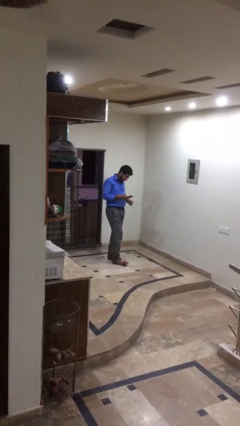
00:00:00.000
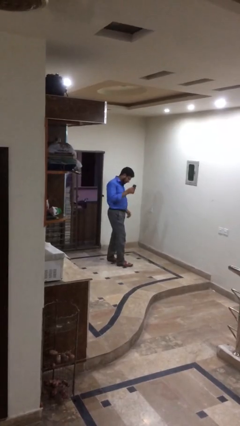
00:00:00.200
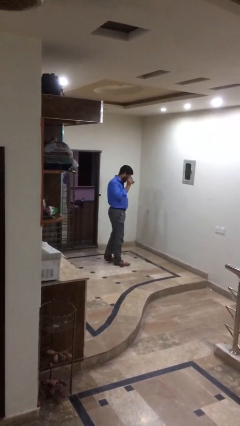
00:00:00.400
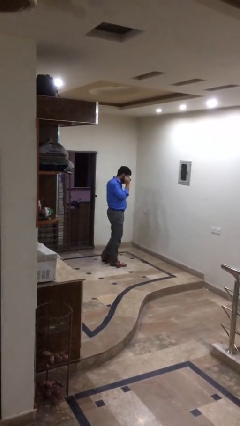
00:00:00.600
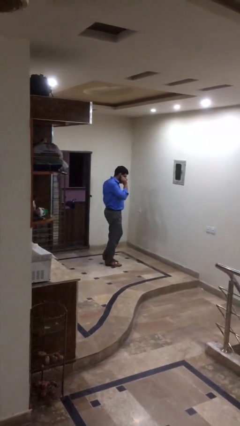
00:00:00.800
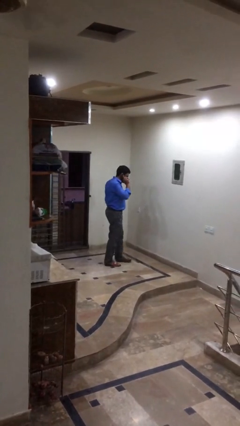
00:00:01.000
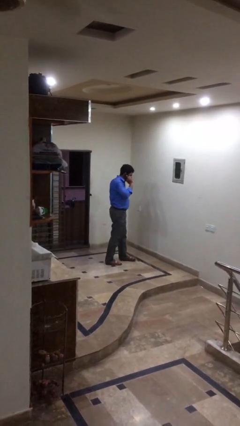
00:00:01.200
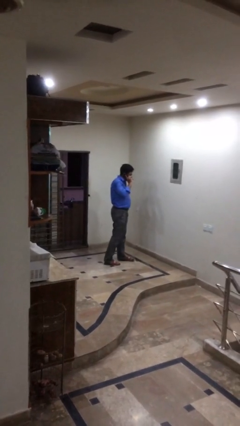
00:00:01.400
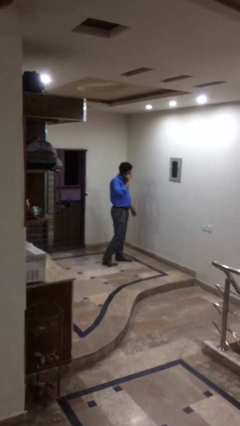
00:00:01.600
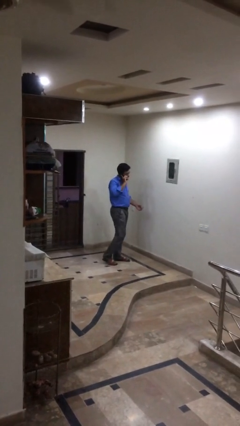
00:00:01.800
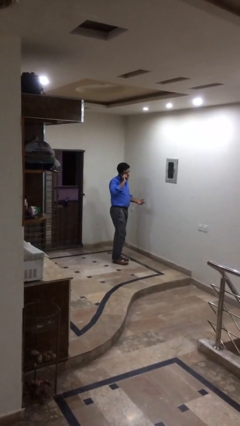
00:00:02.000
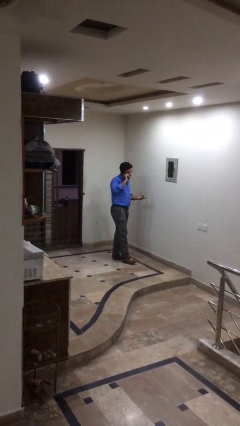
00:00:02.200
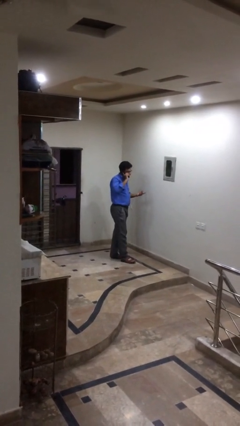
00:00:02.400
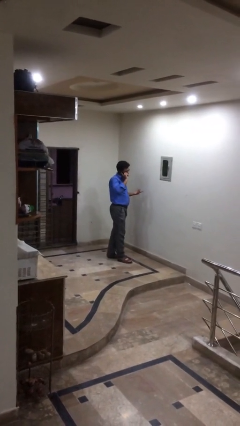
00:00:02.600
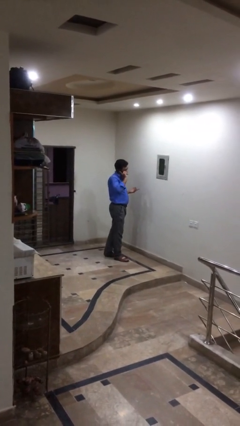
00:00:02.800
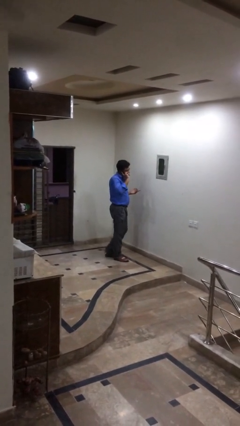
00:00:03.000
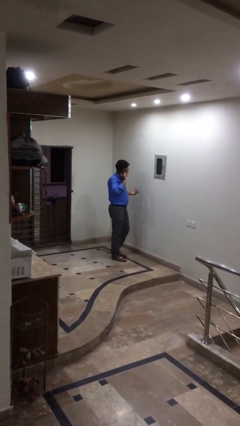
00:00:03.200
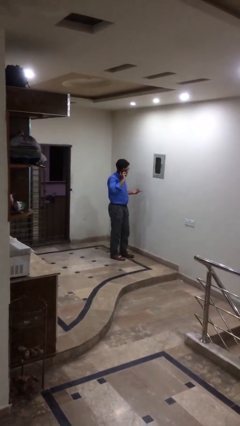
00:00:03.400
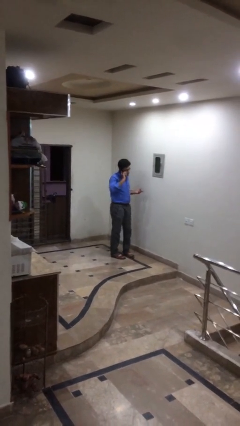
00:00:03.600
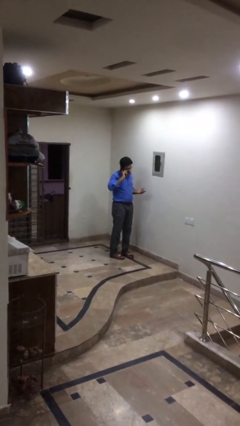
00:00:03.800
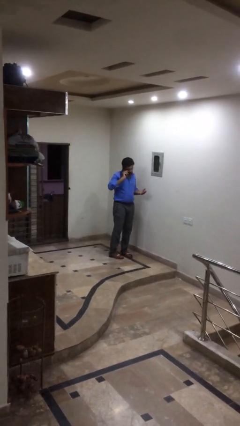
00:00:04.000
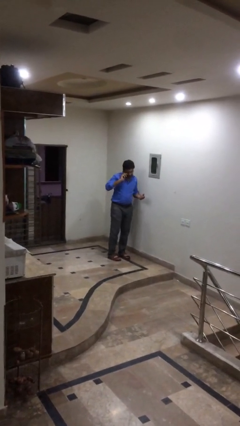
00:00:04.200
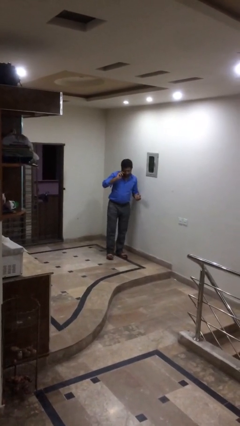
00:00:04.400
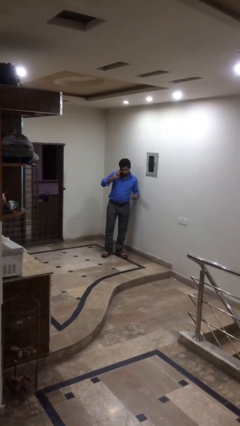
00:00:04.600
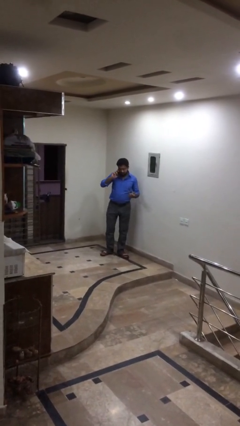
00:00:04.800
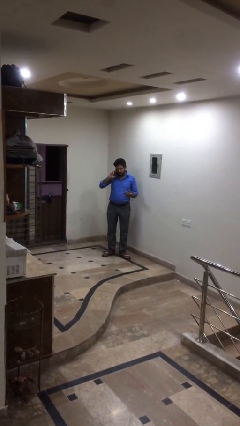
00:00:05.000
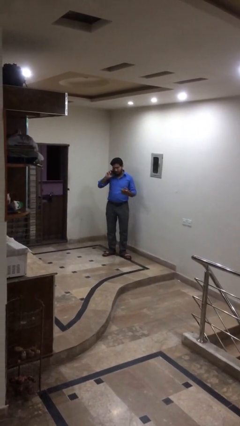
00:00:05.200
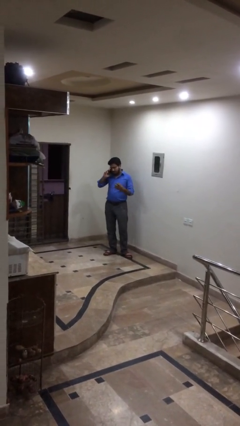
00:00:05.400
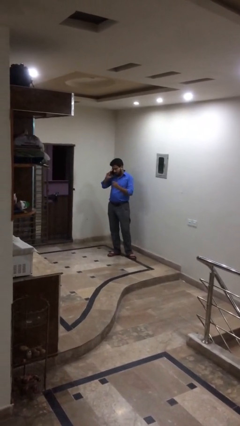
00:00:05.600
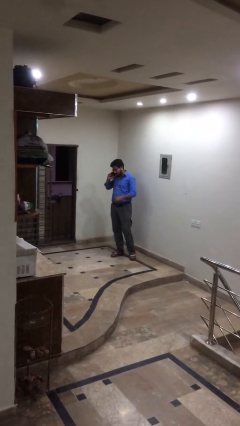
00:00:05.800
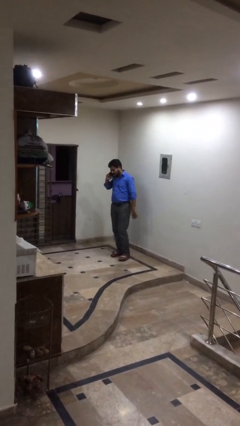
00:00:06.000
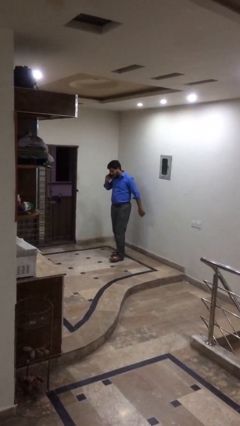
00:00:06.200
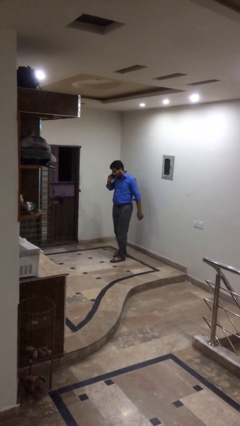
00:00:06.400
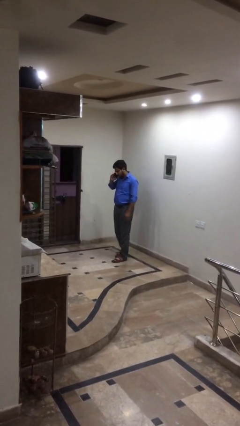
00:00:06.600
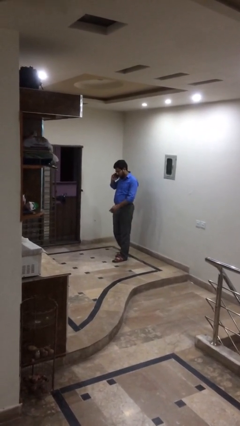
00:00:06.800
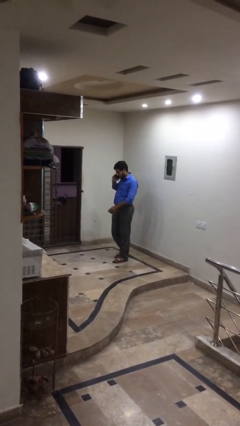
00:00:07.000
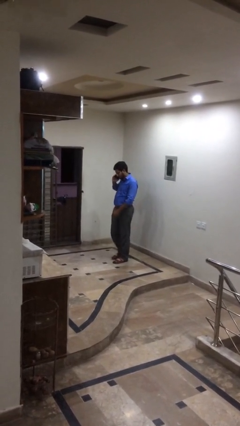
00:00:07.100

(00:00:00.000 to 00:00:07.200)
person talks on phone

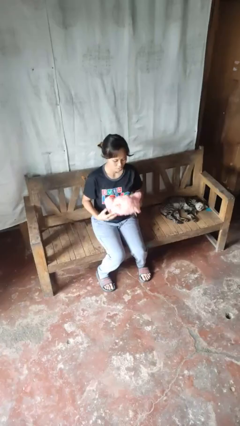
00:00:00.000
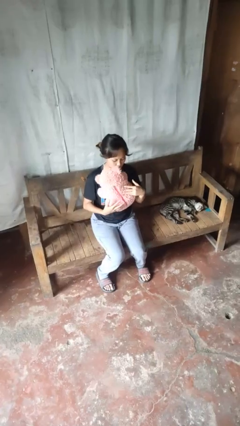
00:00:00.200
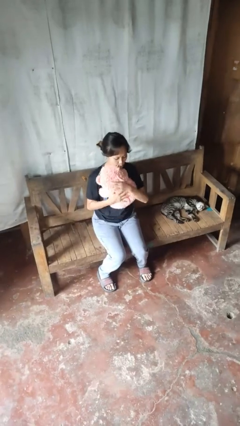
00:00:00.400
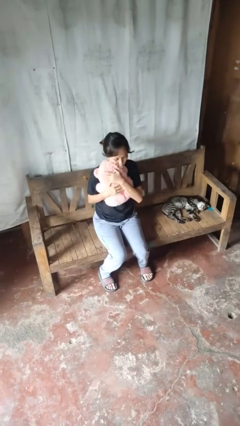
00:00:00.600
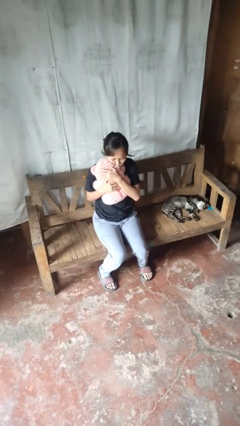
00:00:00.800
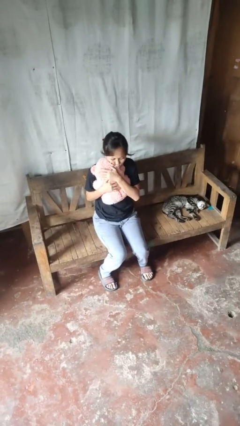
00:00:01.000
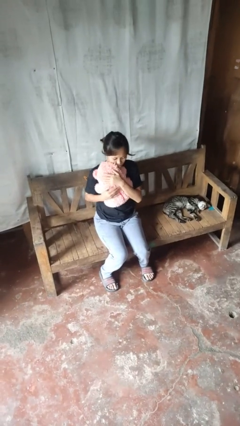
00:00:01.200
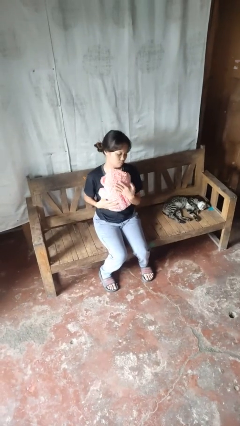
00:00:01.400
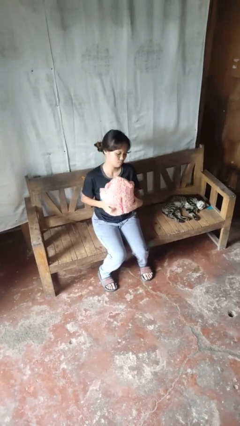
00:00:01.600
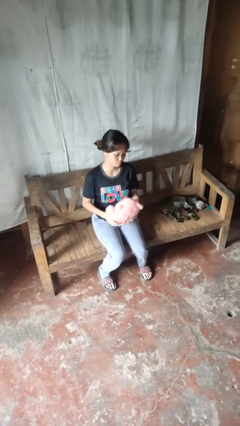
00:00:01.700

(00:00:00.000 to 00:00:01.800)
person hugs stuffed animal

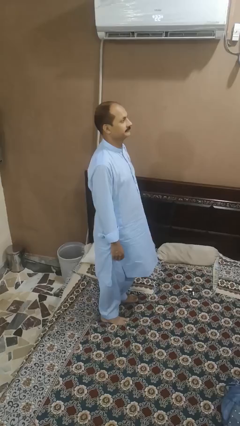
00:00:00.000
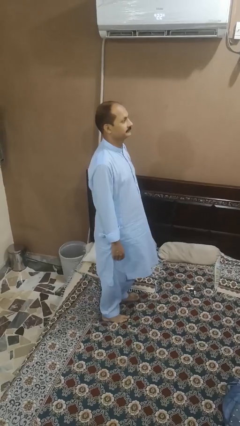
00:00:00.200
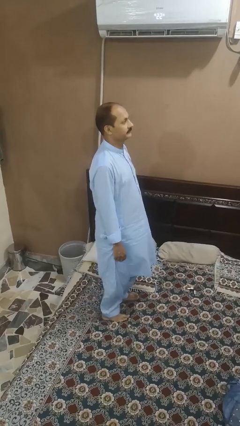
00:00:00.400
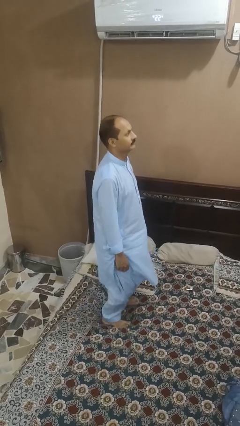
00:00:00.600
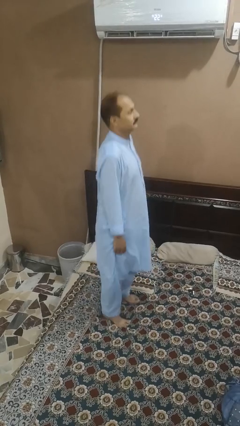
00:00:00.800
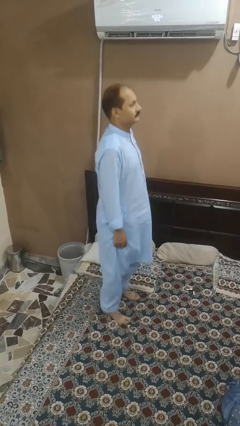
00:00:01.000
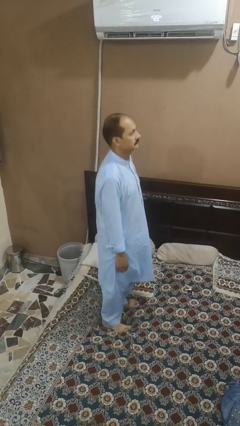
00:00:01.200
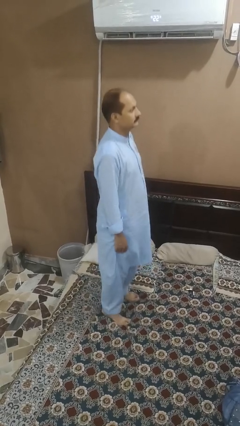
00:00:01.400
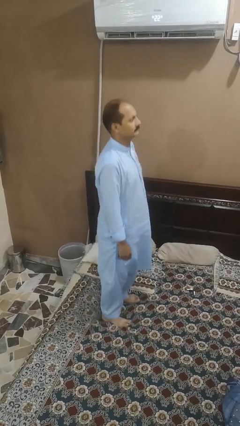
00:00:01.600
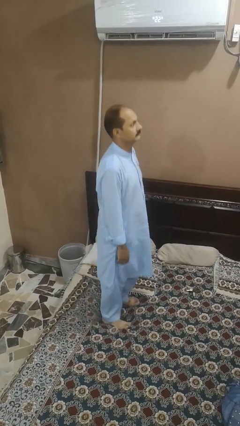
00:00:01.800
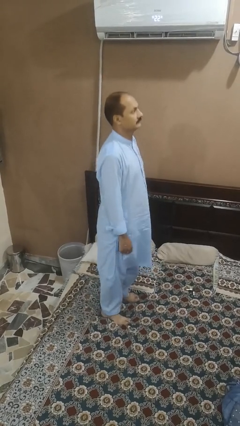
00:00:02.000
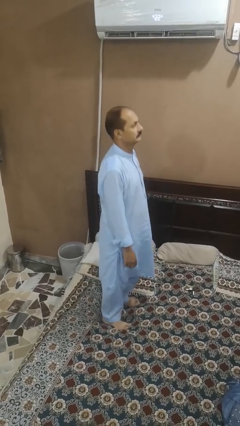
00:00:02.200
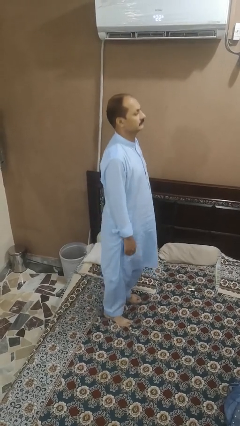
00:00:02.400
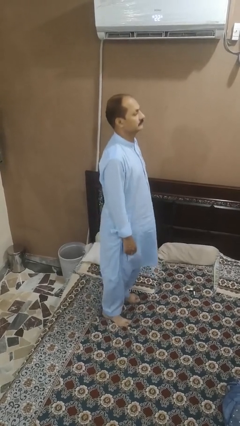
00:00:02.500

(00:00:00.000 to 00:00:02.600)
person jumps on bed

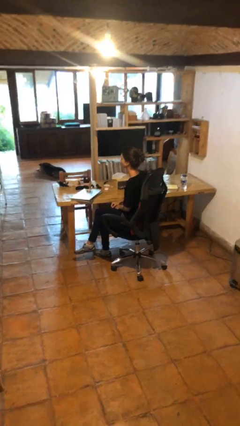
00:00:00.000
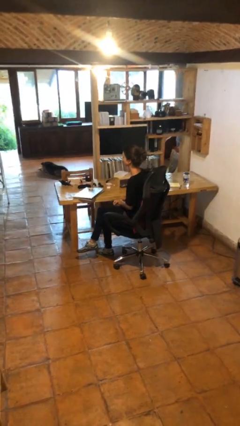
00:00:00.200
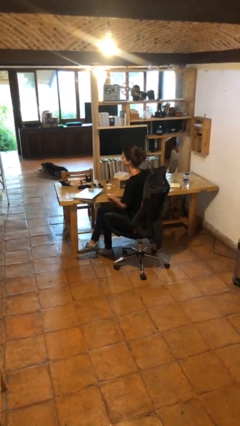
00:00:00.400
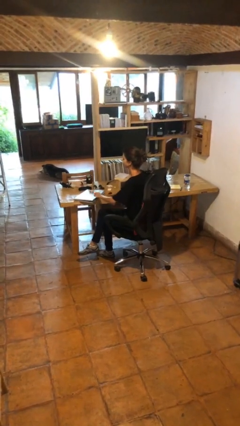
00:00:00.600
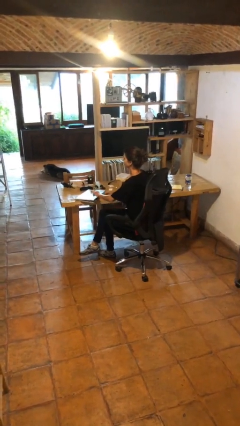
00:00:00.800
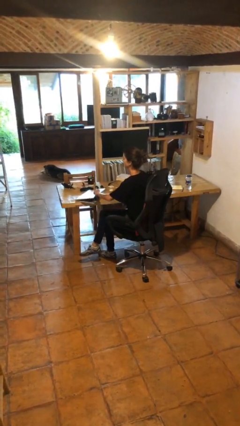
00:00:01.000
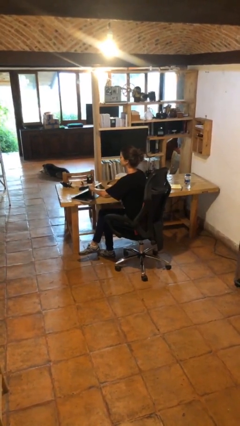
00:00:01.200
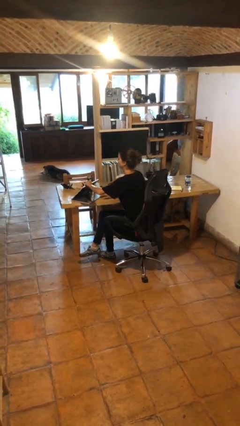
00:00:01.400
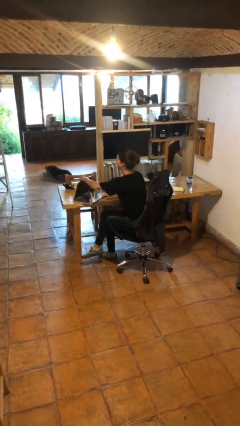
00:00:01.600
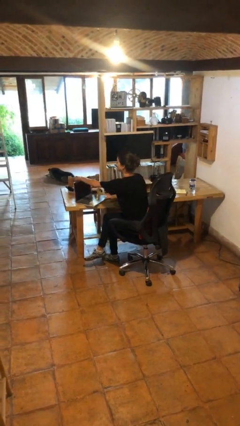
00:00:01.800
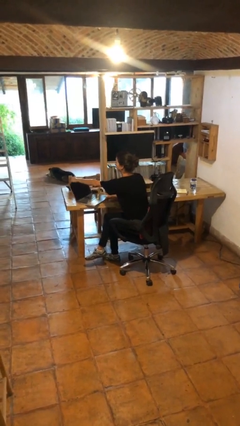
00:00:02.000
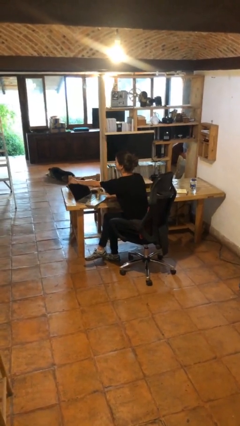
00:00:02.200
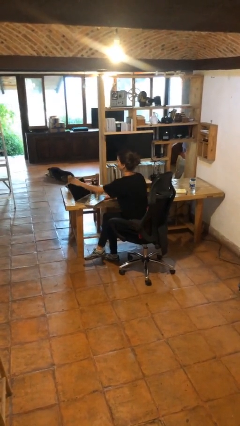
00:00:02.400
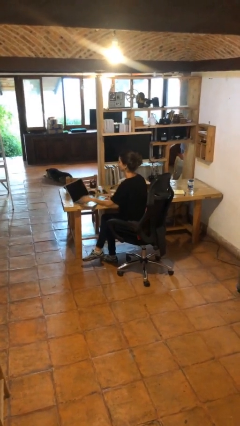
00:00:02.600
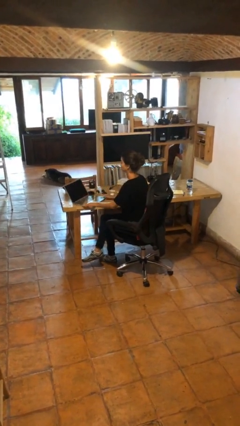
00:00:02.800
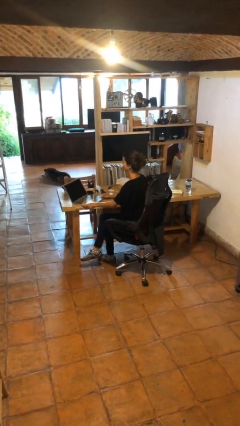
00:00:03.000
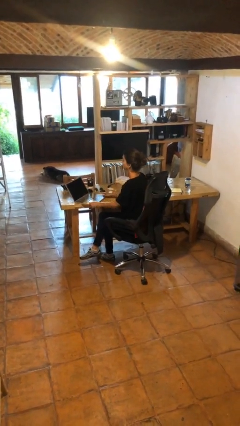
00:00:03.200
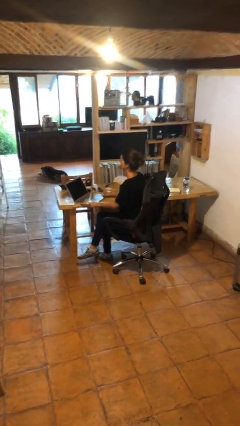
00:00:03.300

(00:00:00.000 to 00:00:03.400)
person opens laptop

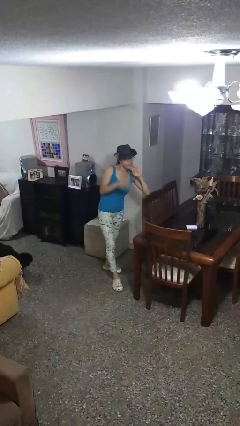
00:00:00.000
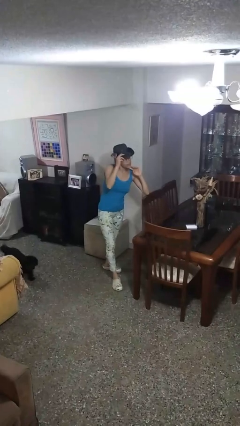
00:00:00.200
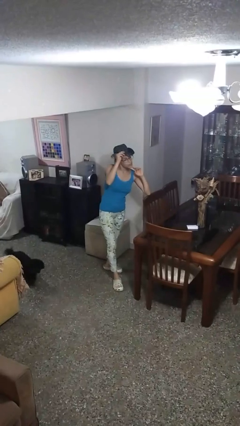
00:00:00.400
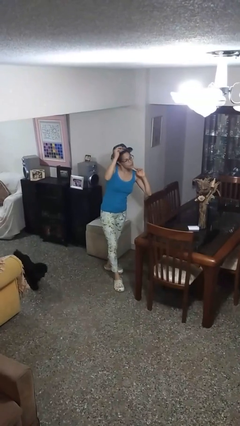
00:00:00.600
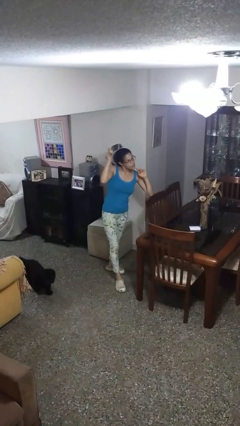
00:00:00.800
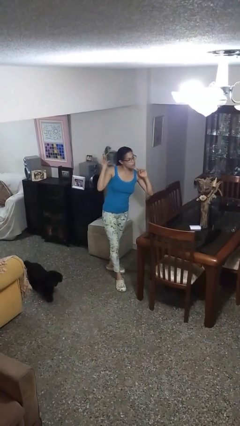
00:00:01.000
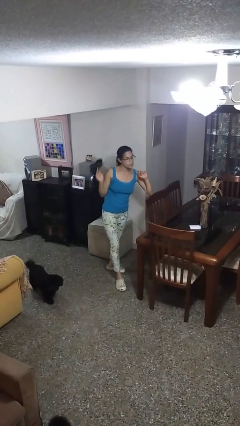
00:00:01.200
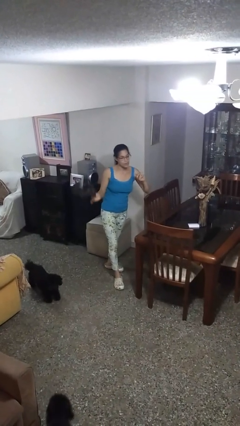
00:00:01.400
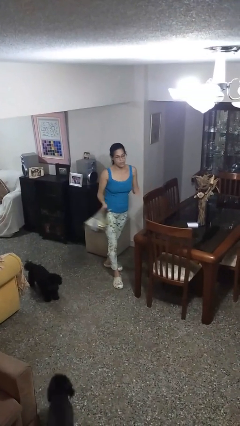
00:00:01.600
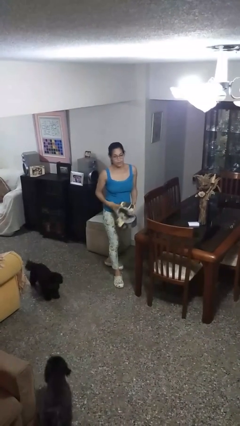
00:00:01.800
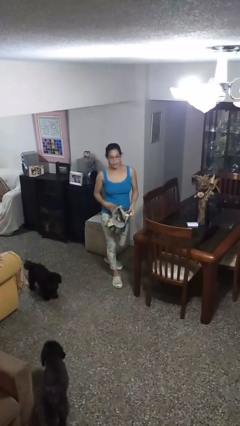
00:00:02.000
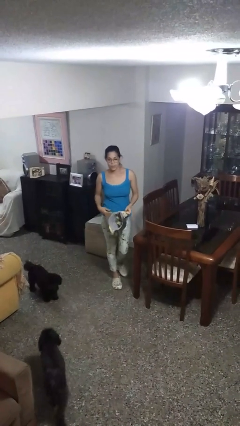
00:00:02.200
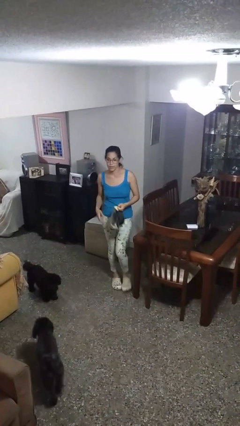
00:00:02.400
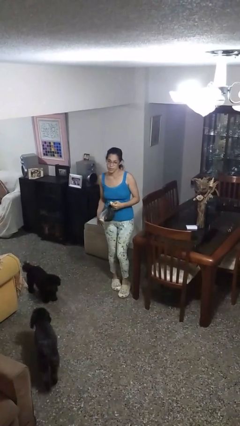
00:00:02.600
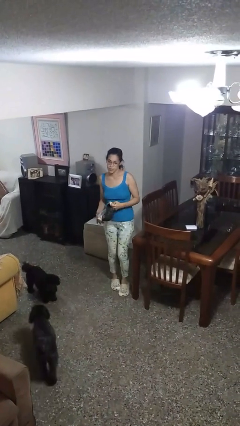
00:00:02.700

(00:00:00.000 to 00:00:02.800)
person takes off hat
